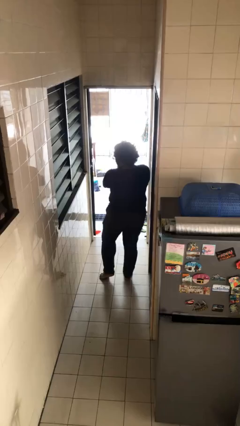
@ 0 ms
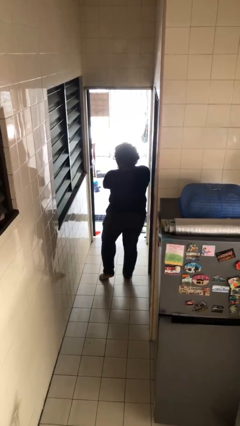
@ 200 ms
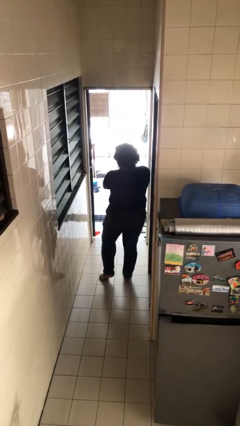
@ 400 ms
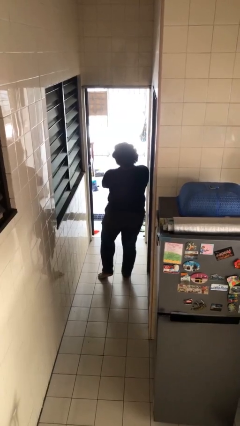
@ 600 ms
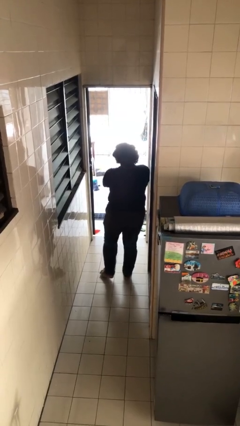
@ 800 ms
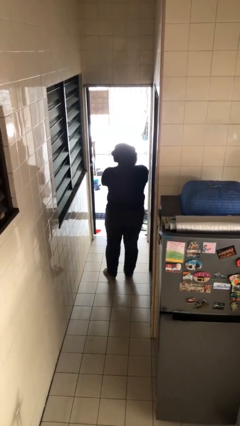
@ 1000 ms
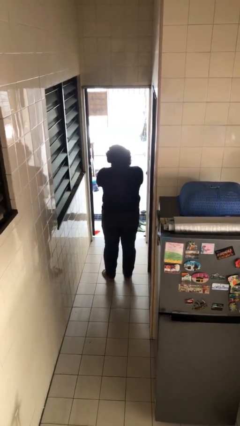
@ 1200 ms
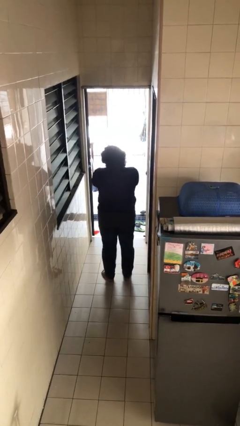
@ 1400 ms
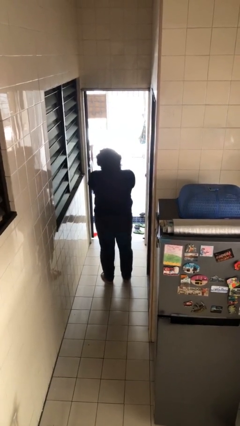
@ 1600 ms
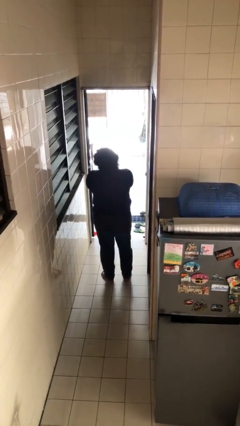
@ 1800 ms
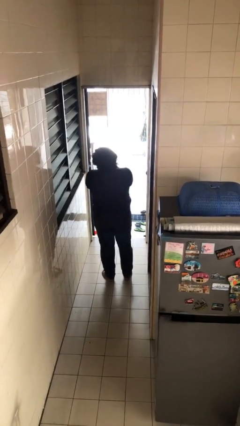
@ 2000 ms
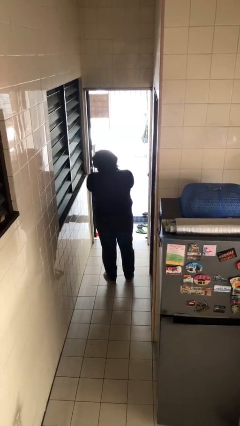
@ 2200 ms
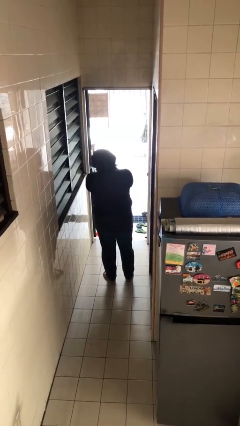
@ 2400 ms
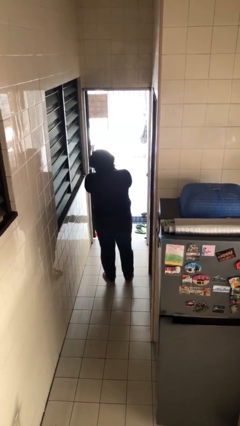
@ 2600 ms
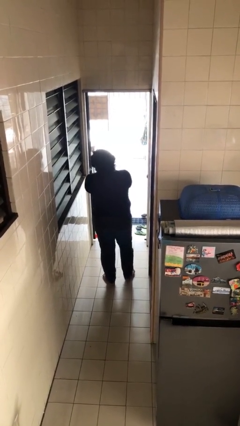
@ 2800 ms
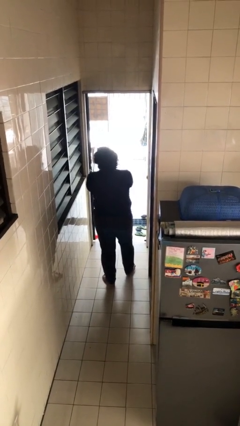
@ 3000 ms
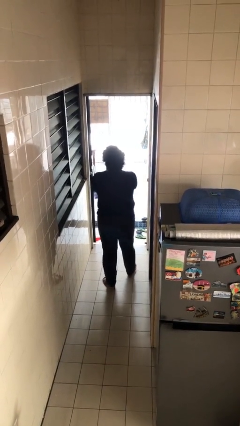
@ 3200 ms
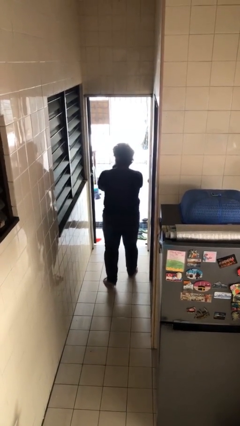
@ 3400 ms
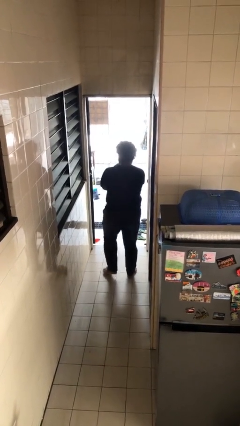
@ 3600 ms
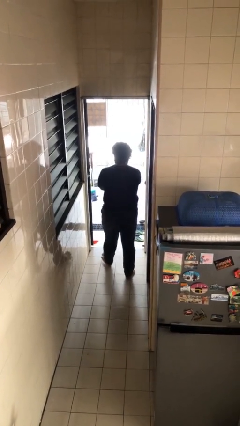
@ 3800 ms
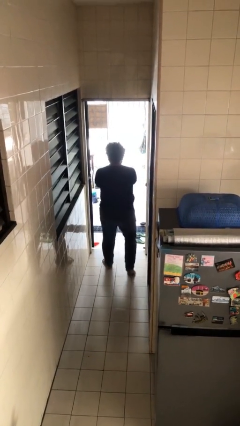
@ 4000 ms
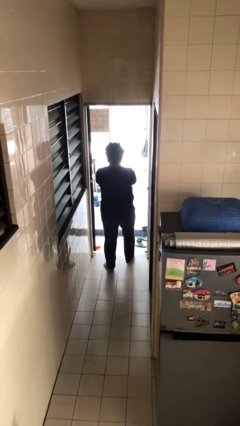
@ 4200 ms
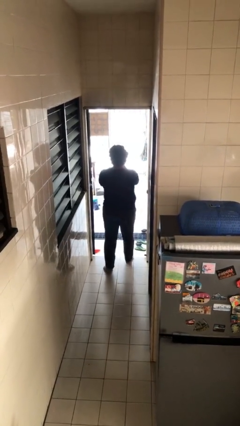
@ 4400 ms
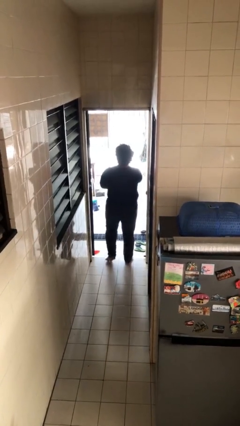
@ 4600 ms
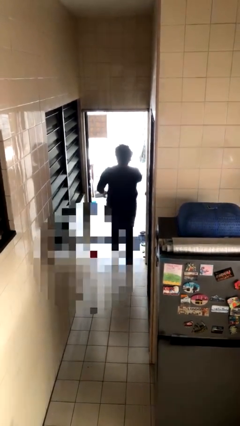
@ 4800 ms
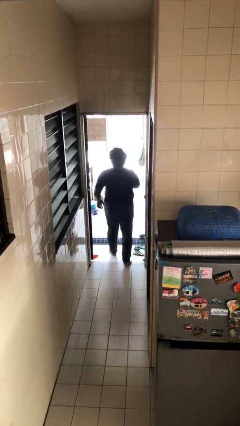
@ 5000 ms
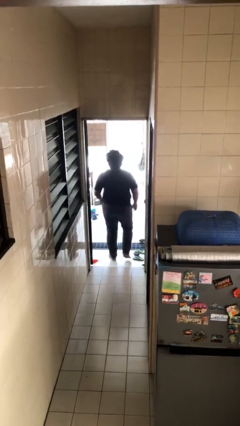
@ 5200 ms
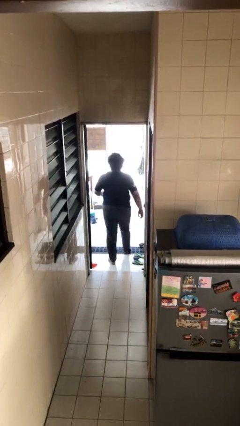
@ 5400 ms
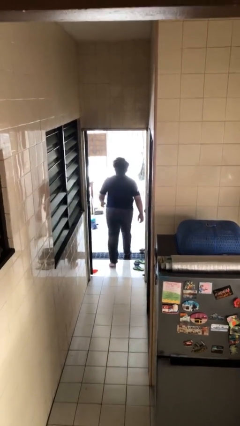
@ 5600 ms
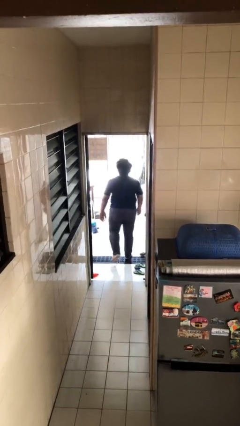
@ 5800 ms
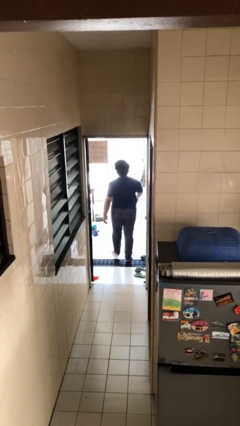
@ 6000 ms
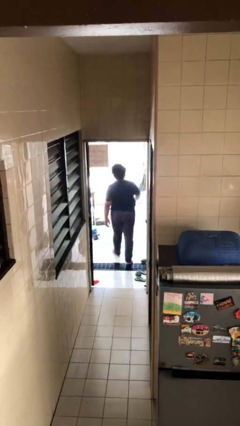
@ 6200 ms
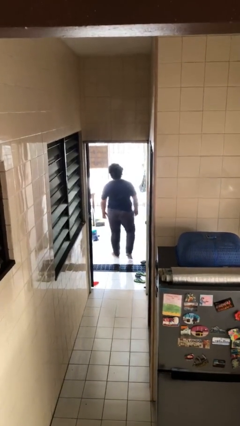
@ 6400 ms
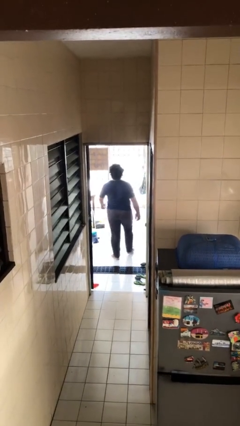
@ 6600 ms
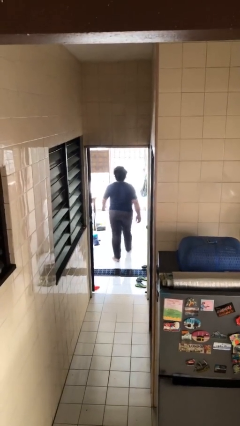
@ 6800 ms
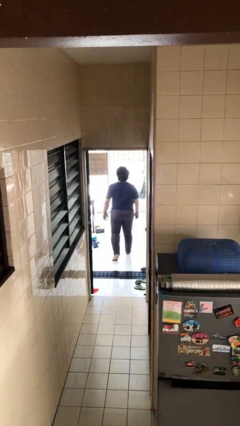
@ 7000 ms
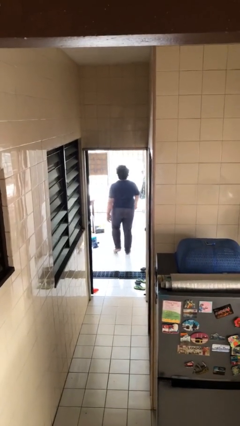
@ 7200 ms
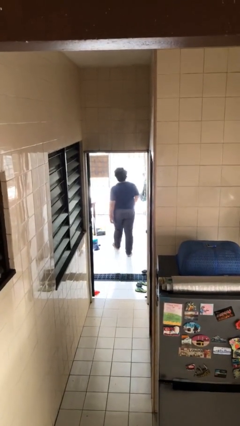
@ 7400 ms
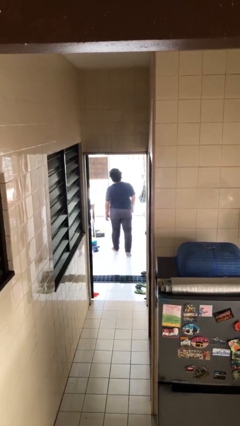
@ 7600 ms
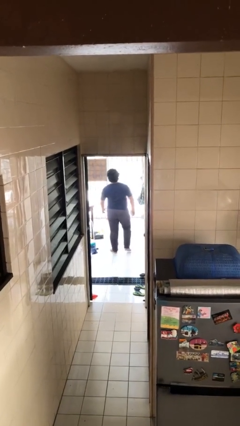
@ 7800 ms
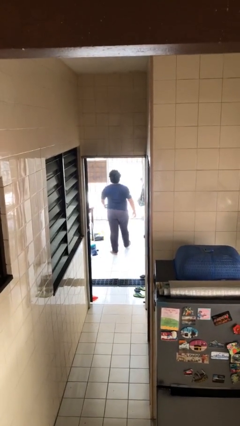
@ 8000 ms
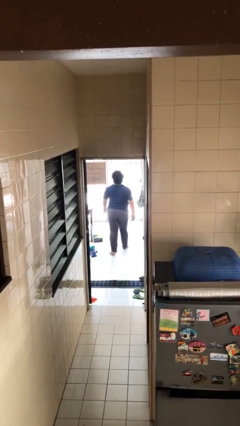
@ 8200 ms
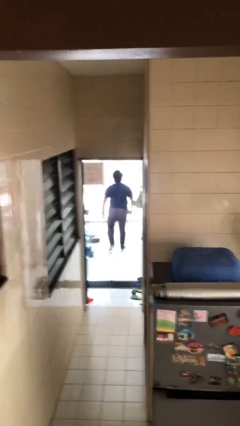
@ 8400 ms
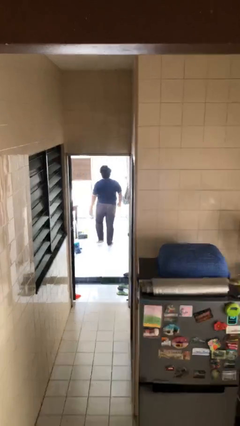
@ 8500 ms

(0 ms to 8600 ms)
person exits scene through structure

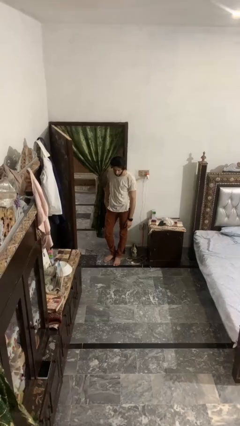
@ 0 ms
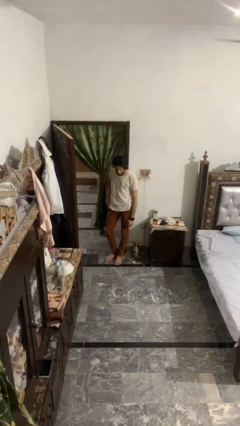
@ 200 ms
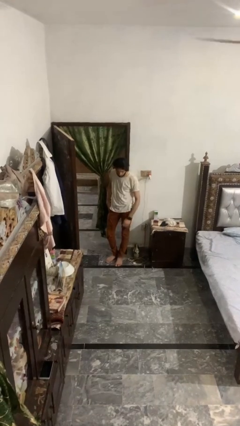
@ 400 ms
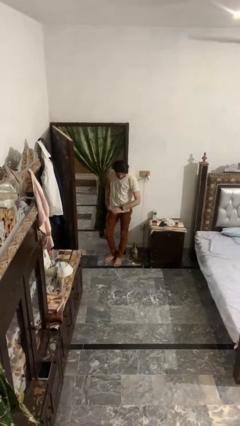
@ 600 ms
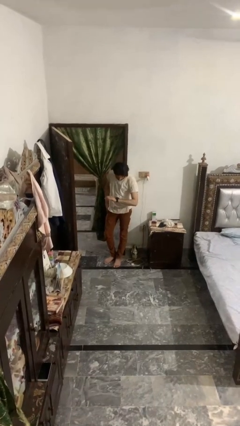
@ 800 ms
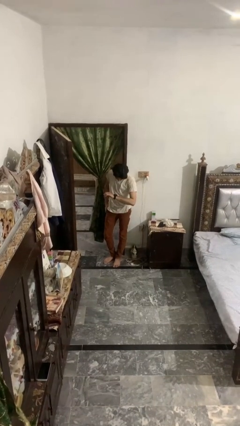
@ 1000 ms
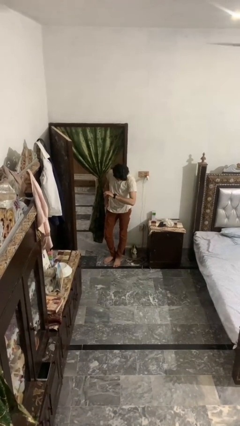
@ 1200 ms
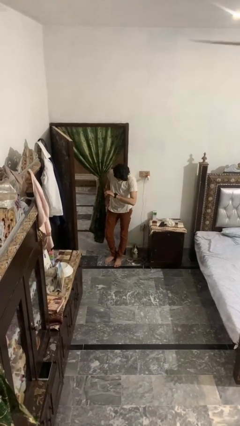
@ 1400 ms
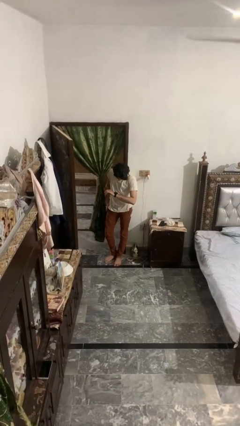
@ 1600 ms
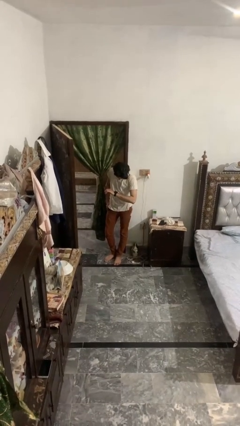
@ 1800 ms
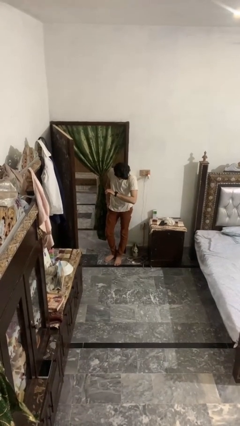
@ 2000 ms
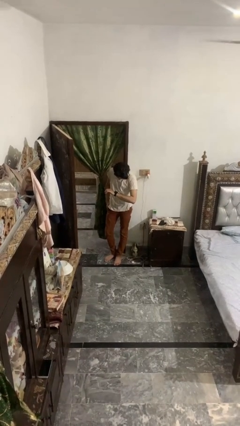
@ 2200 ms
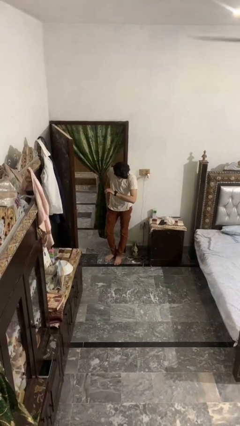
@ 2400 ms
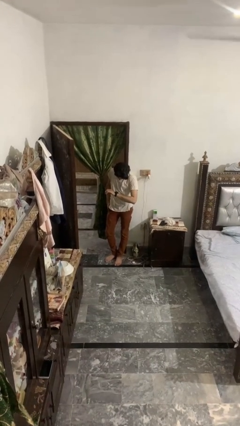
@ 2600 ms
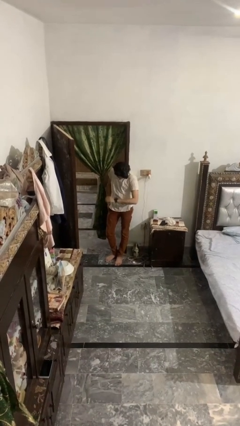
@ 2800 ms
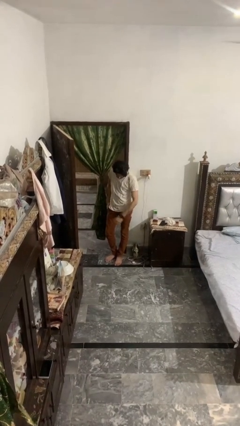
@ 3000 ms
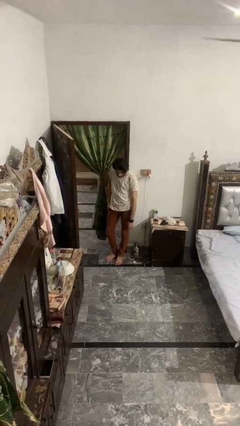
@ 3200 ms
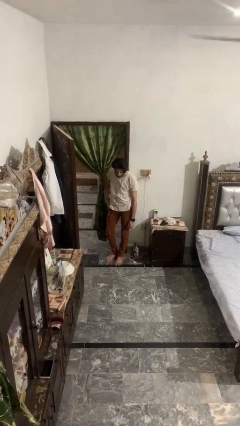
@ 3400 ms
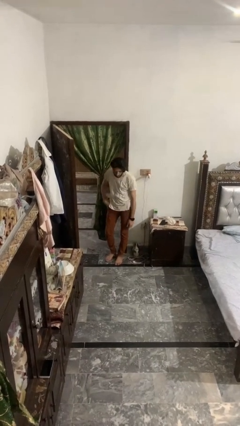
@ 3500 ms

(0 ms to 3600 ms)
person looks at wristwatch

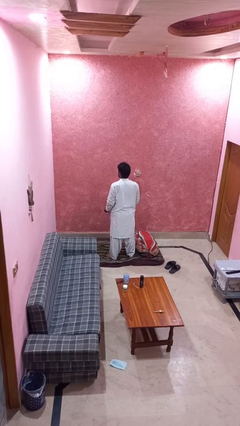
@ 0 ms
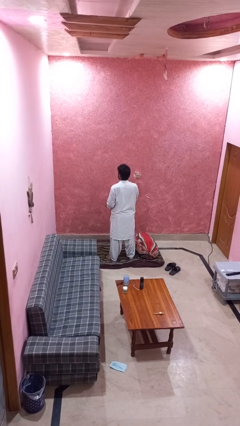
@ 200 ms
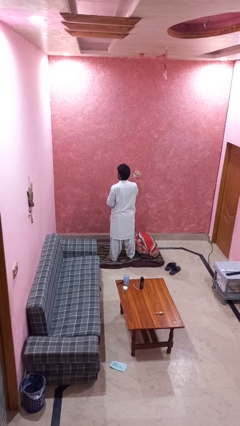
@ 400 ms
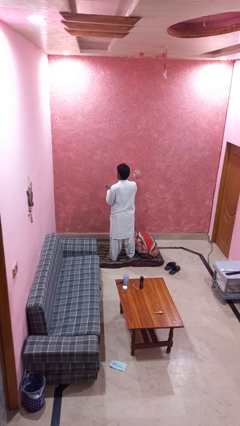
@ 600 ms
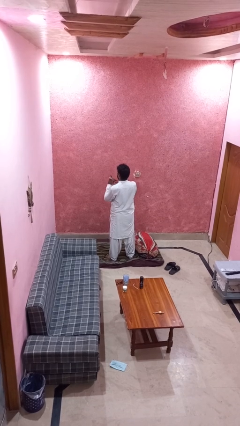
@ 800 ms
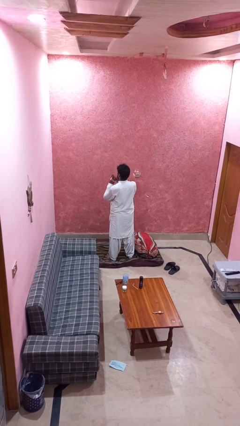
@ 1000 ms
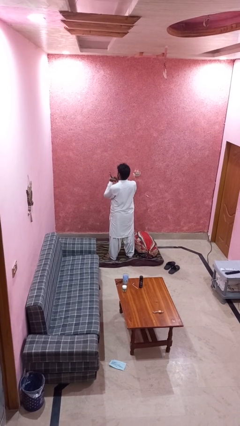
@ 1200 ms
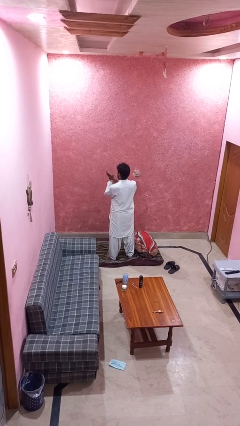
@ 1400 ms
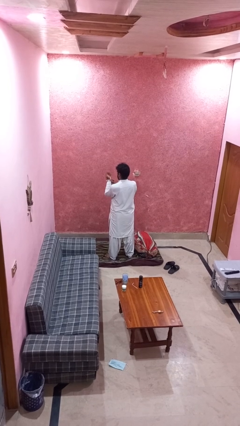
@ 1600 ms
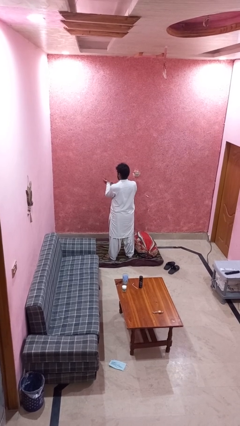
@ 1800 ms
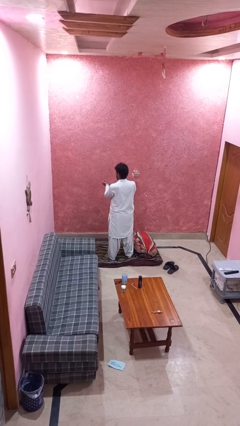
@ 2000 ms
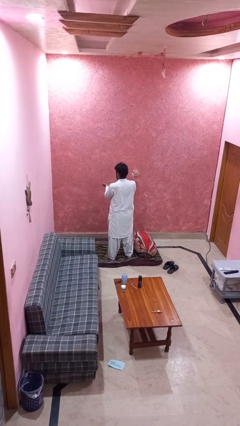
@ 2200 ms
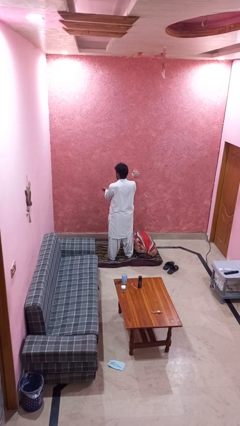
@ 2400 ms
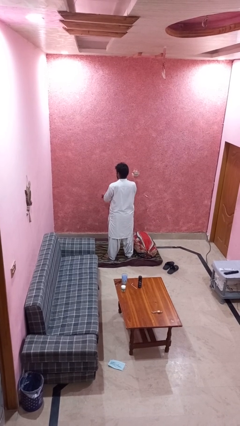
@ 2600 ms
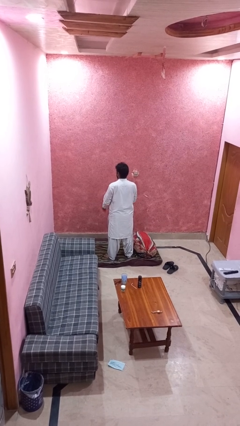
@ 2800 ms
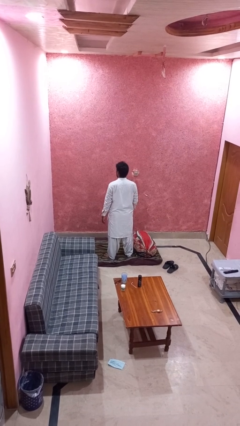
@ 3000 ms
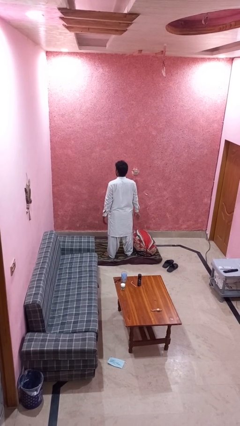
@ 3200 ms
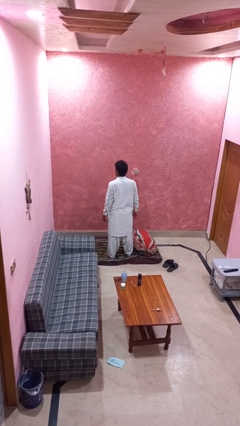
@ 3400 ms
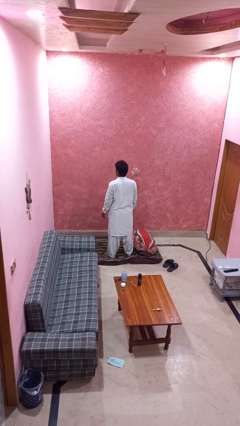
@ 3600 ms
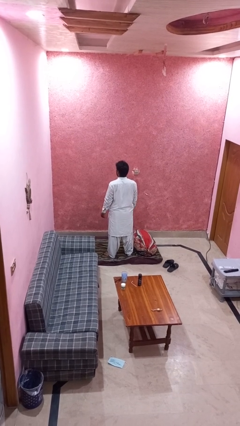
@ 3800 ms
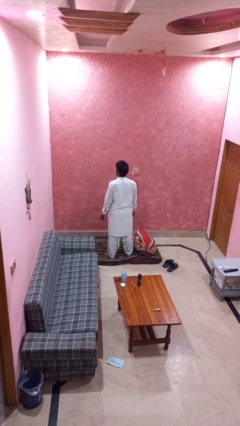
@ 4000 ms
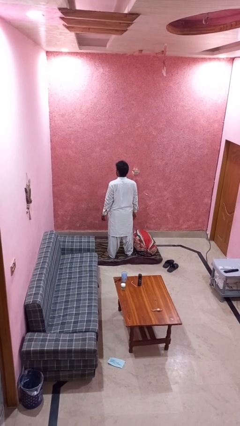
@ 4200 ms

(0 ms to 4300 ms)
person puts on wristwatch

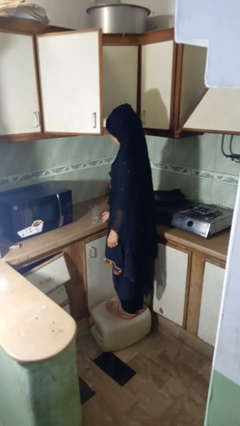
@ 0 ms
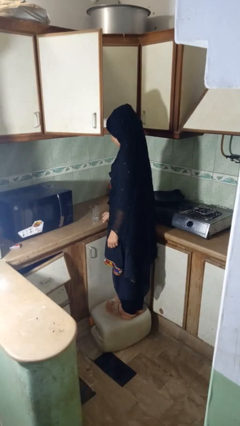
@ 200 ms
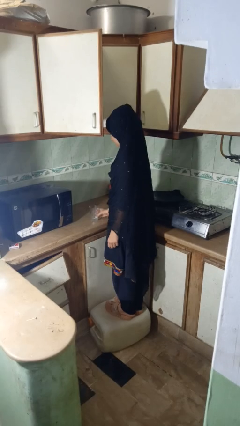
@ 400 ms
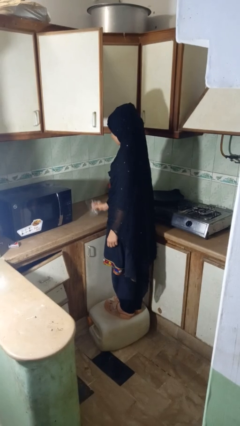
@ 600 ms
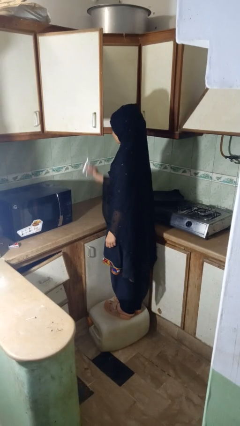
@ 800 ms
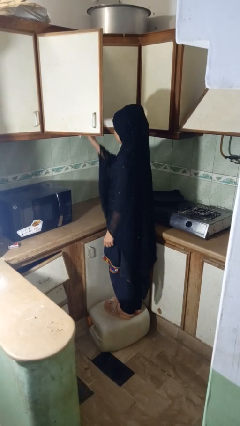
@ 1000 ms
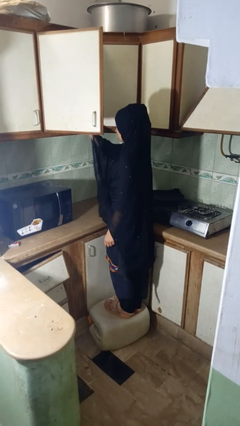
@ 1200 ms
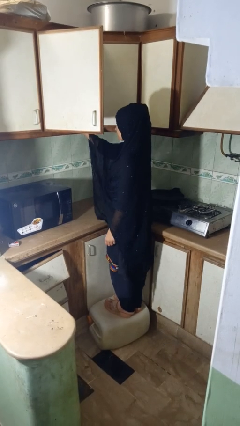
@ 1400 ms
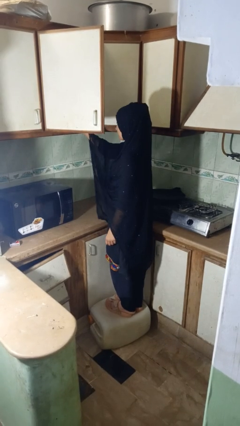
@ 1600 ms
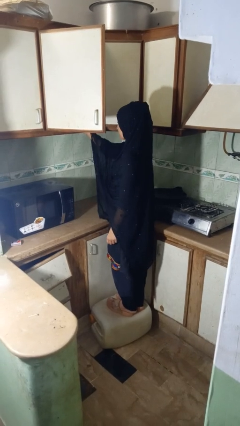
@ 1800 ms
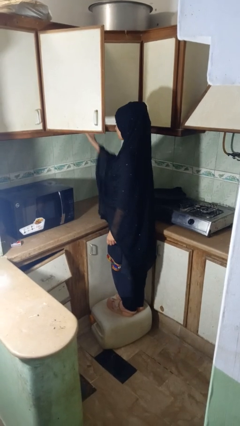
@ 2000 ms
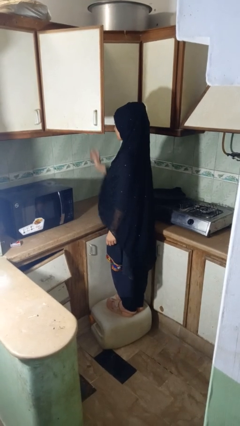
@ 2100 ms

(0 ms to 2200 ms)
person picks up object from cabinet
